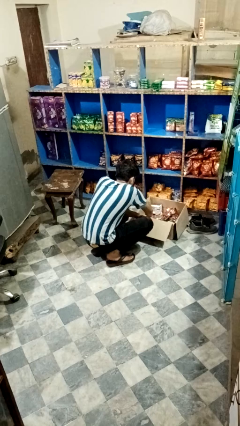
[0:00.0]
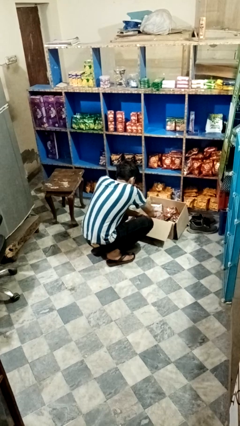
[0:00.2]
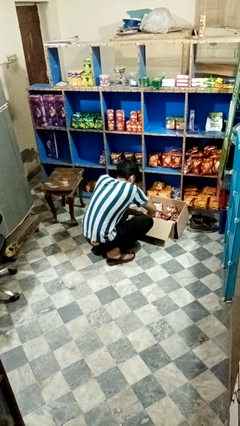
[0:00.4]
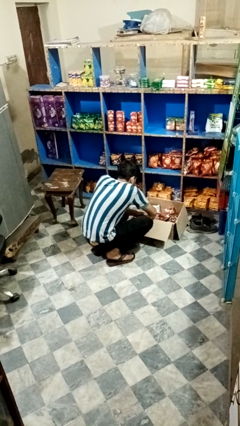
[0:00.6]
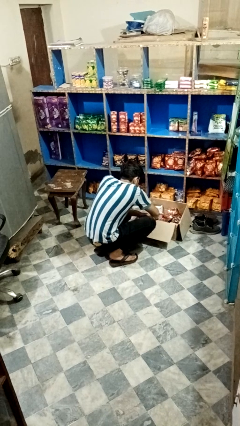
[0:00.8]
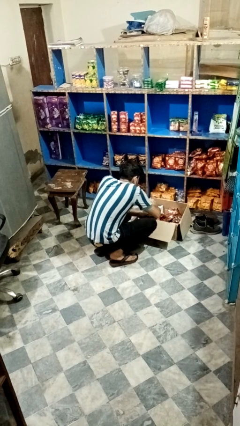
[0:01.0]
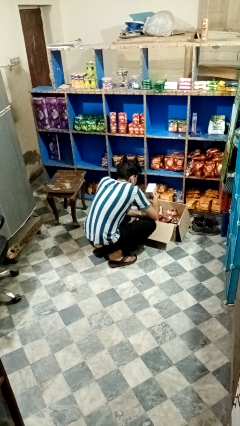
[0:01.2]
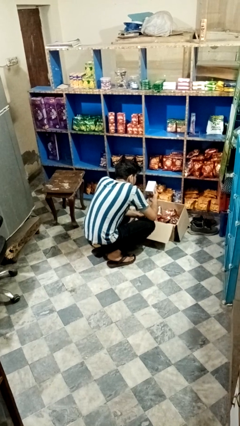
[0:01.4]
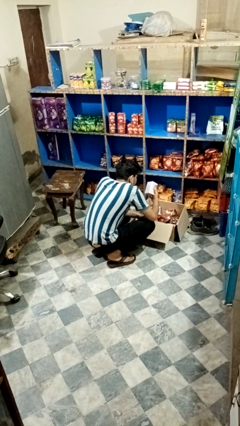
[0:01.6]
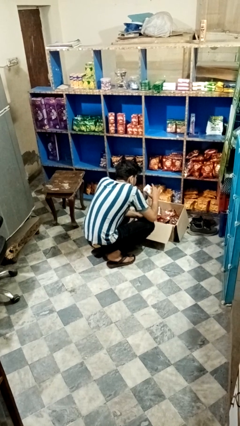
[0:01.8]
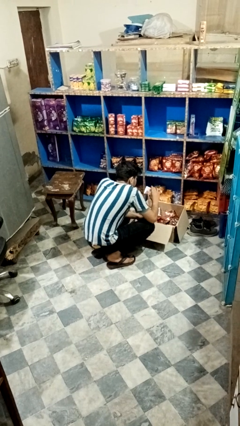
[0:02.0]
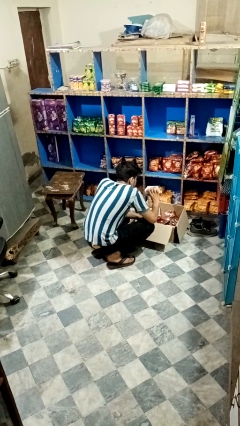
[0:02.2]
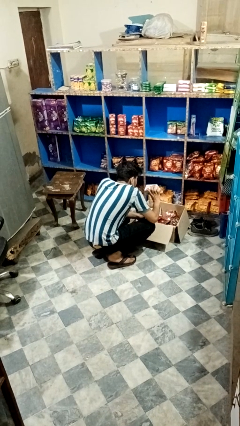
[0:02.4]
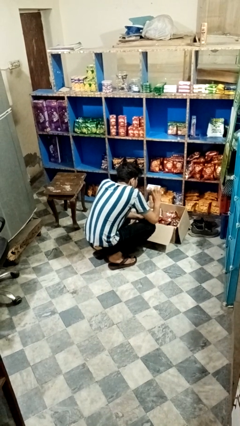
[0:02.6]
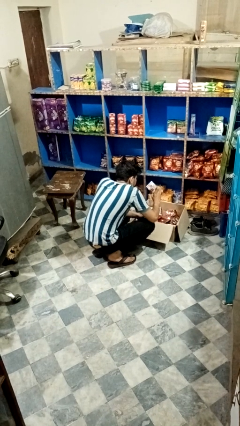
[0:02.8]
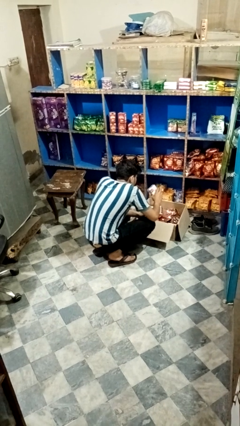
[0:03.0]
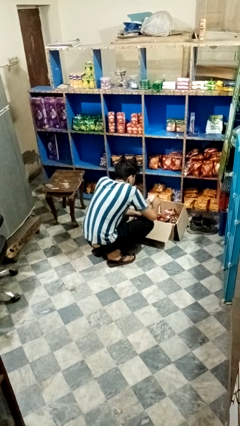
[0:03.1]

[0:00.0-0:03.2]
person searches in box

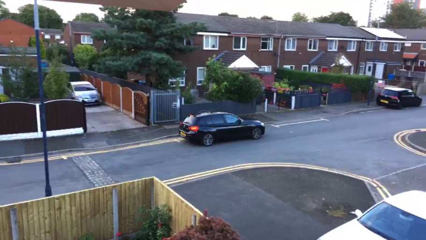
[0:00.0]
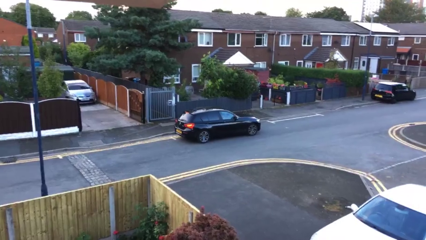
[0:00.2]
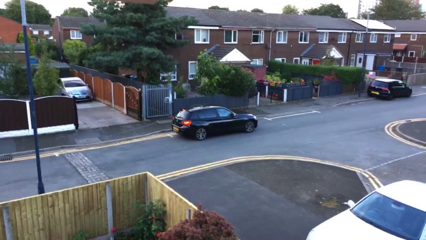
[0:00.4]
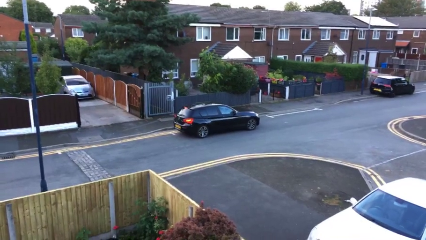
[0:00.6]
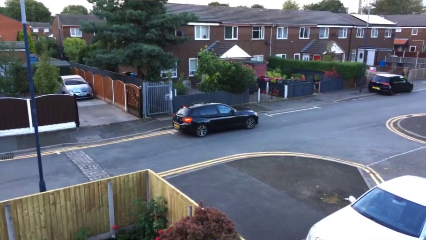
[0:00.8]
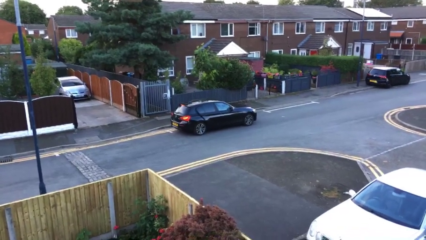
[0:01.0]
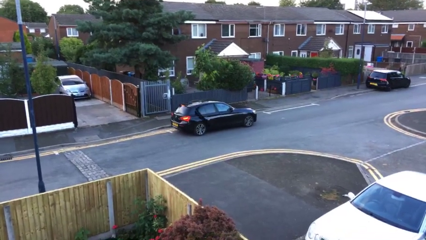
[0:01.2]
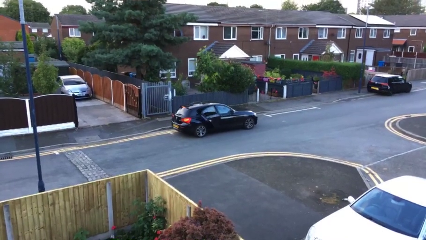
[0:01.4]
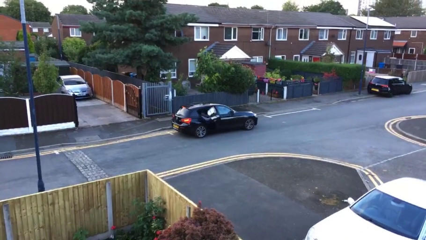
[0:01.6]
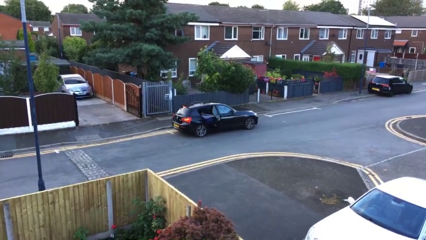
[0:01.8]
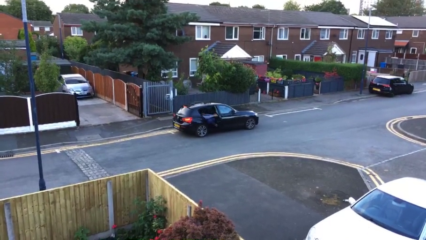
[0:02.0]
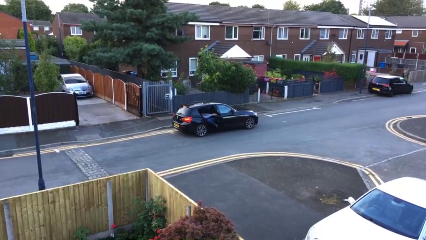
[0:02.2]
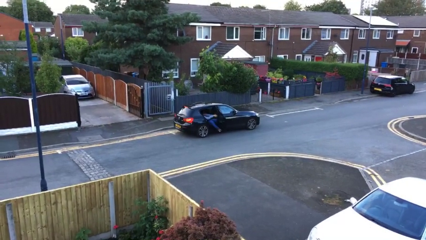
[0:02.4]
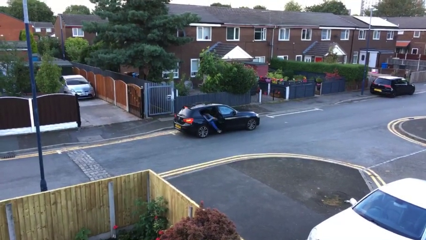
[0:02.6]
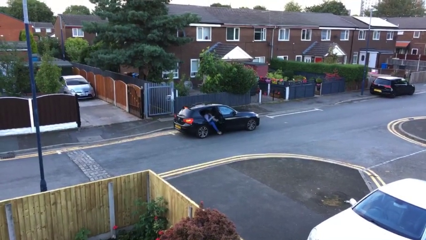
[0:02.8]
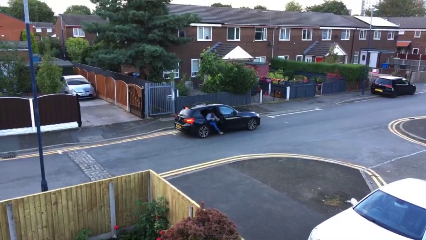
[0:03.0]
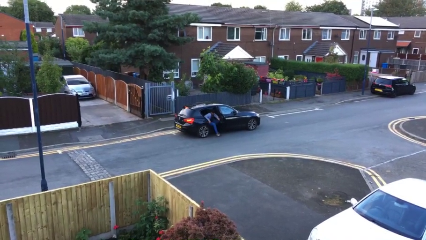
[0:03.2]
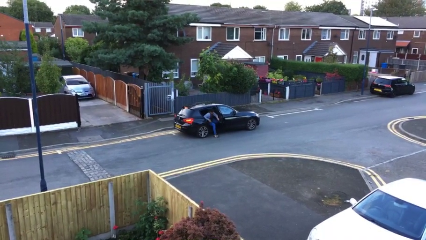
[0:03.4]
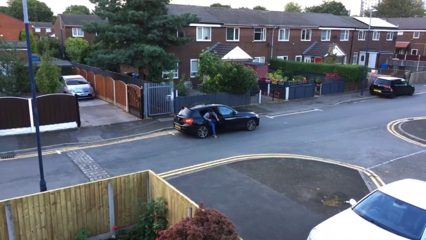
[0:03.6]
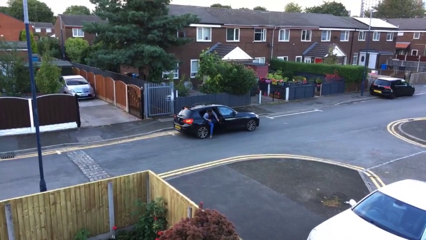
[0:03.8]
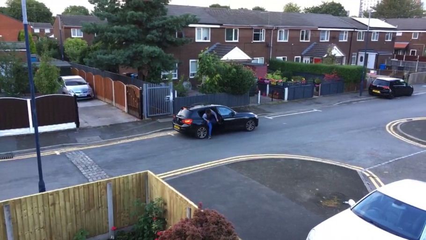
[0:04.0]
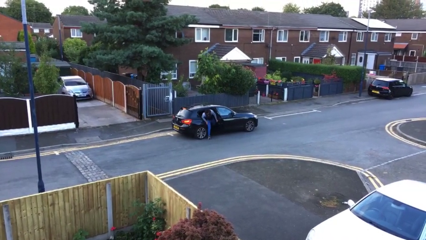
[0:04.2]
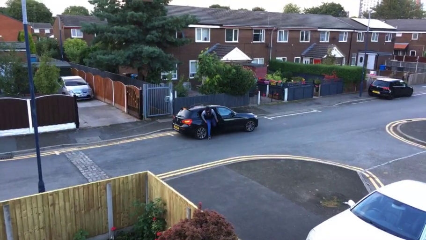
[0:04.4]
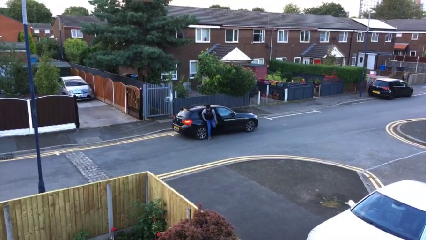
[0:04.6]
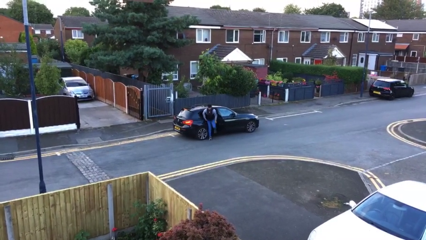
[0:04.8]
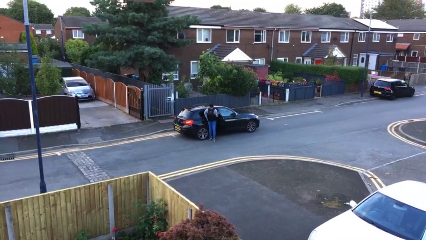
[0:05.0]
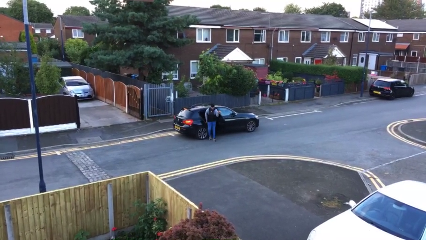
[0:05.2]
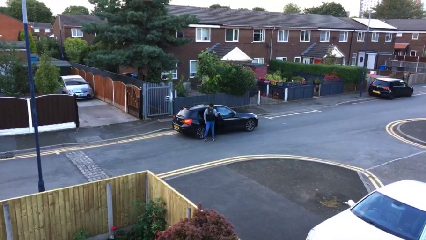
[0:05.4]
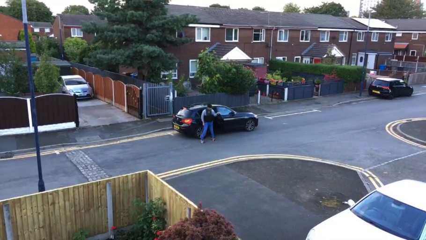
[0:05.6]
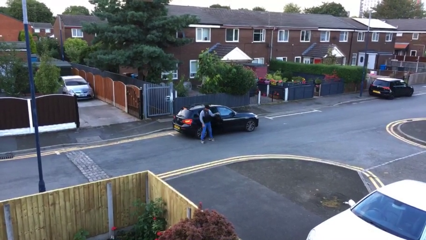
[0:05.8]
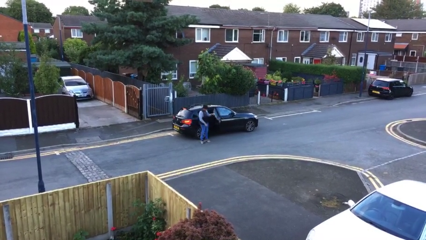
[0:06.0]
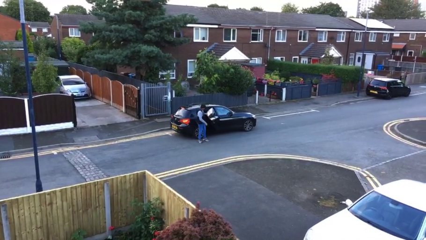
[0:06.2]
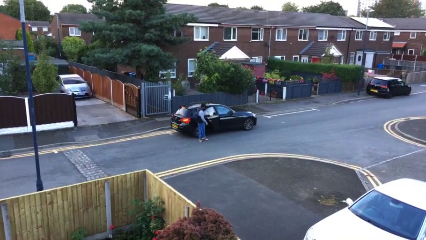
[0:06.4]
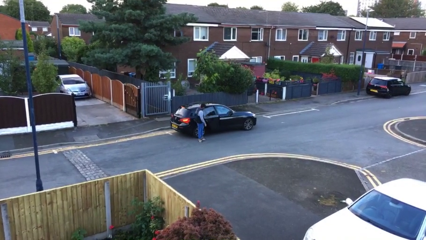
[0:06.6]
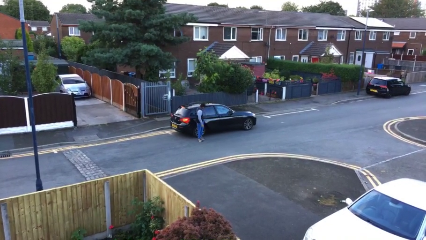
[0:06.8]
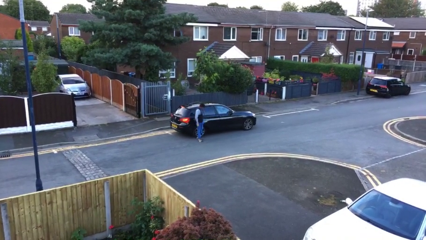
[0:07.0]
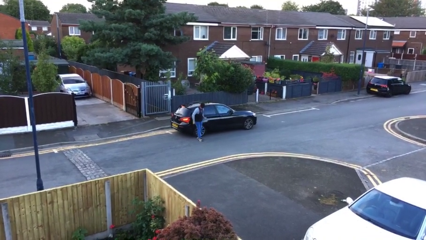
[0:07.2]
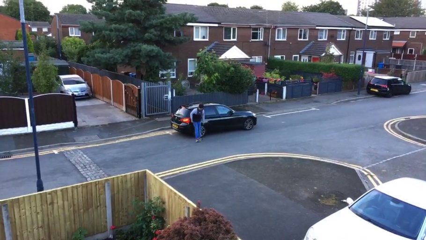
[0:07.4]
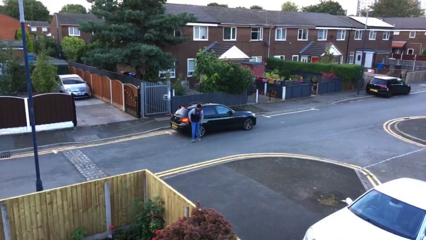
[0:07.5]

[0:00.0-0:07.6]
car drops off person

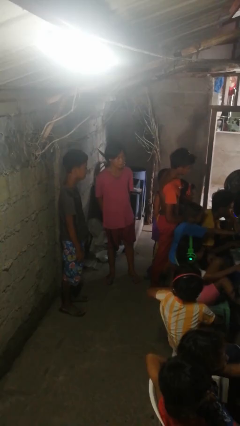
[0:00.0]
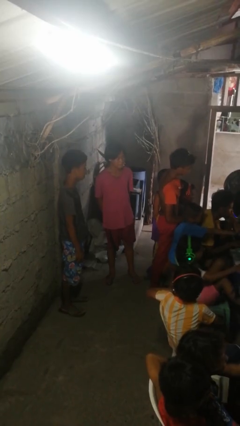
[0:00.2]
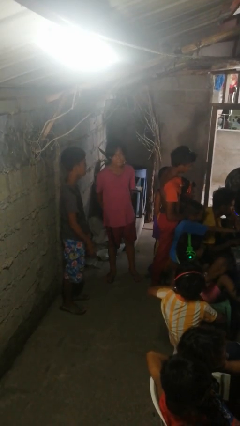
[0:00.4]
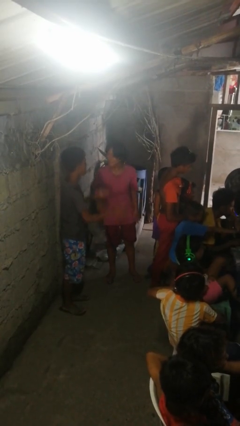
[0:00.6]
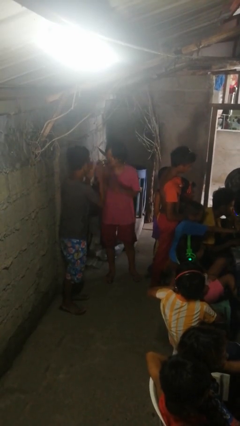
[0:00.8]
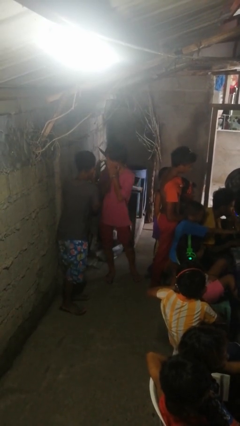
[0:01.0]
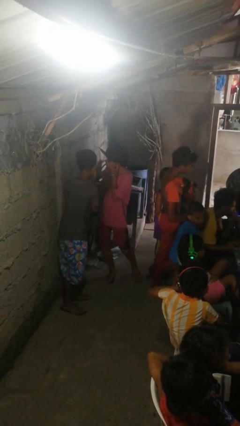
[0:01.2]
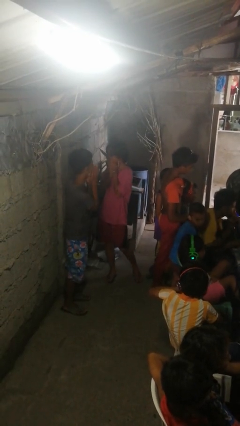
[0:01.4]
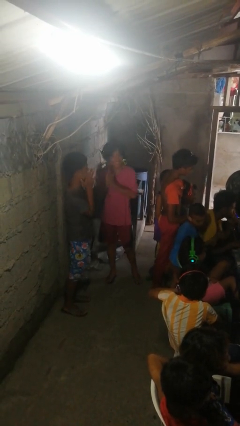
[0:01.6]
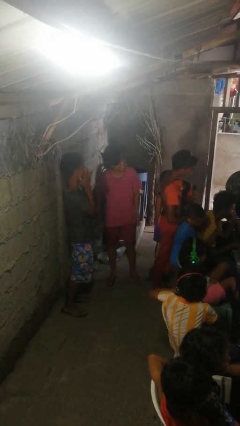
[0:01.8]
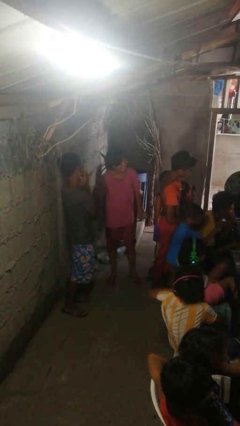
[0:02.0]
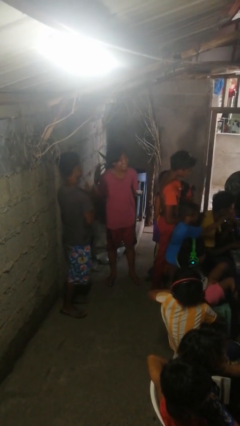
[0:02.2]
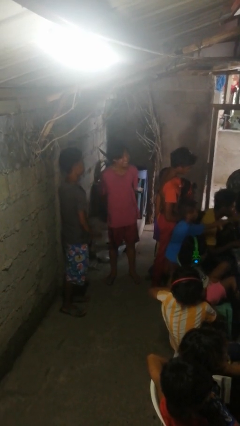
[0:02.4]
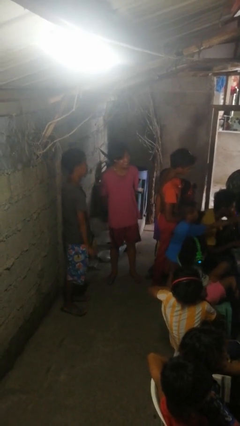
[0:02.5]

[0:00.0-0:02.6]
person laughs with person

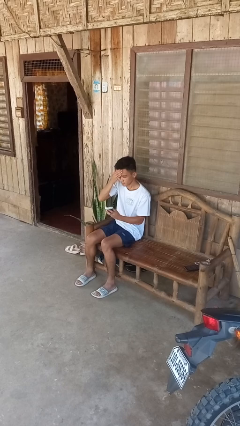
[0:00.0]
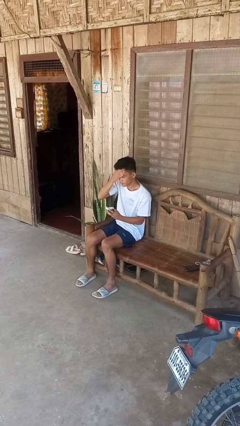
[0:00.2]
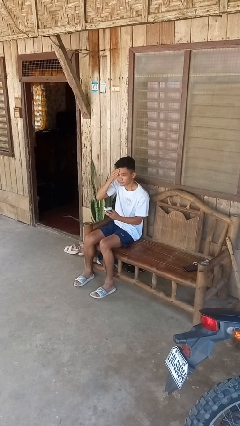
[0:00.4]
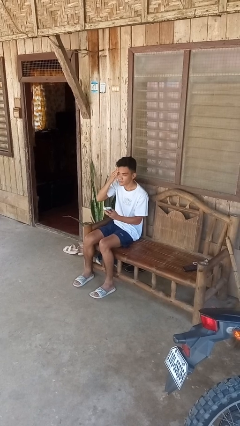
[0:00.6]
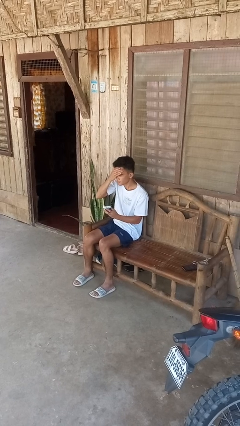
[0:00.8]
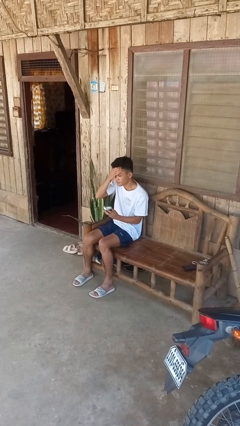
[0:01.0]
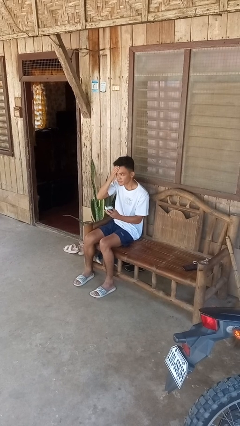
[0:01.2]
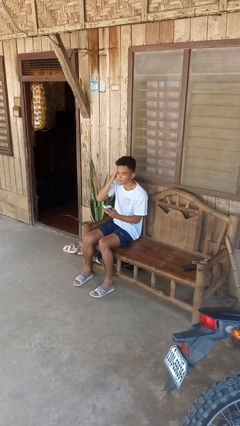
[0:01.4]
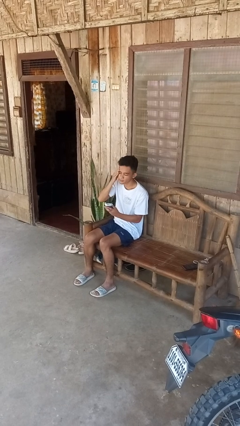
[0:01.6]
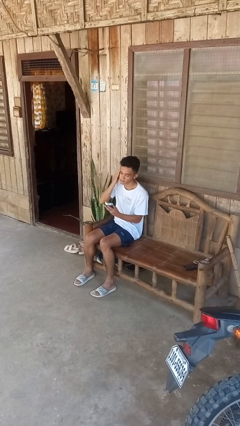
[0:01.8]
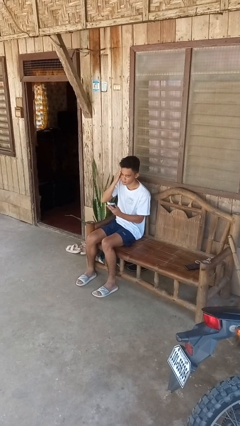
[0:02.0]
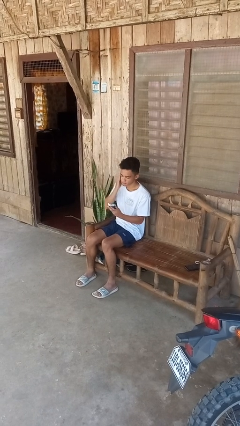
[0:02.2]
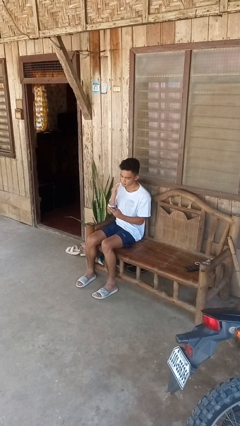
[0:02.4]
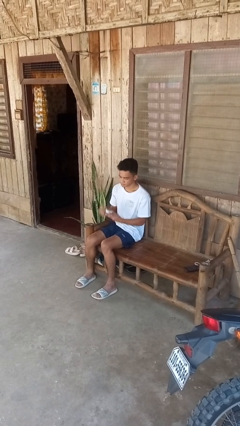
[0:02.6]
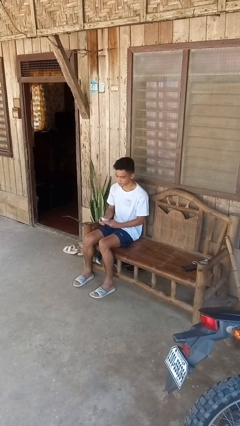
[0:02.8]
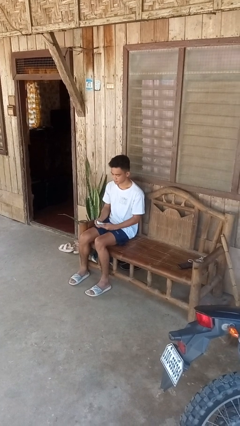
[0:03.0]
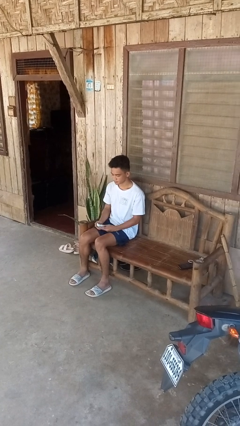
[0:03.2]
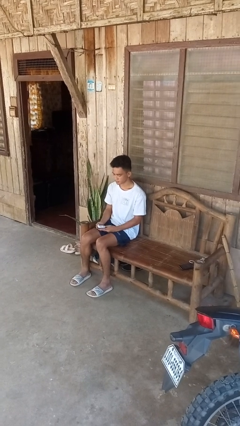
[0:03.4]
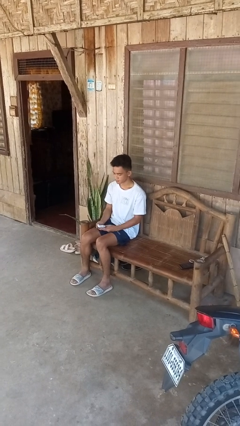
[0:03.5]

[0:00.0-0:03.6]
person applies facial moisturizer

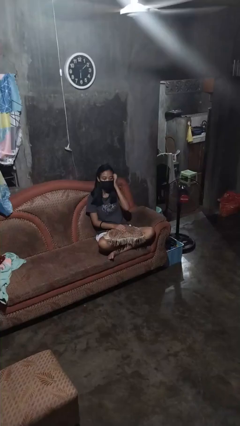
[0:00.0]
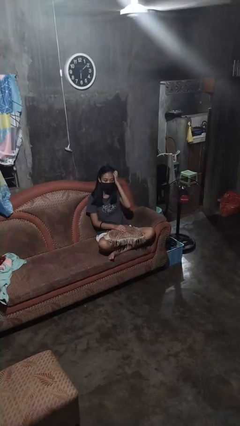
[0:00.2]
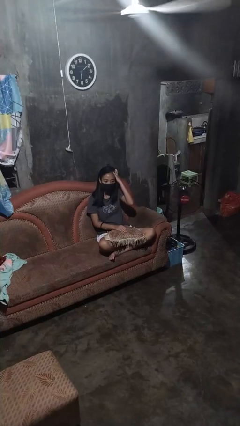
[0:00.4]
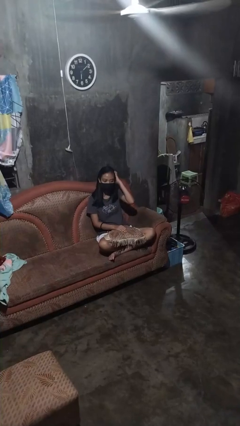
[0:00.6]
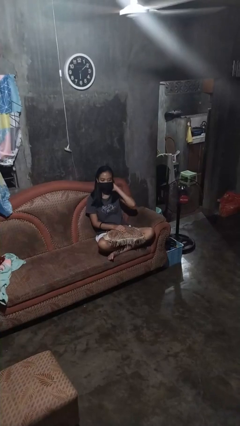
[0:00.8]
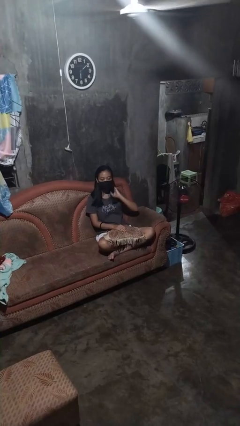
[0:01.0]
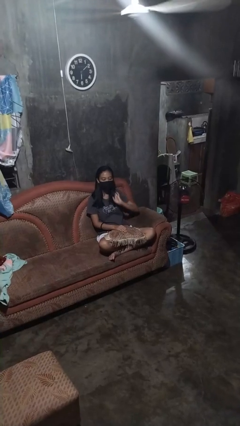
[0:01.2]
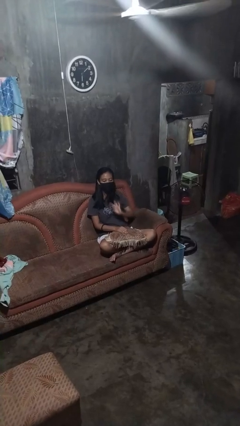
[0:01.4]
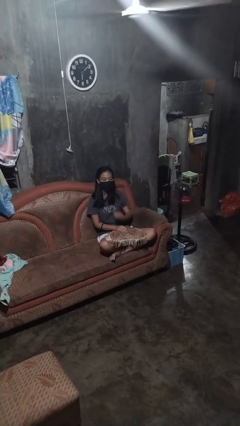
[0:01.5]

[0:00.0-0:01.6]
person strokes hair
